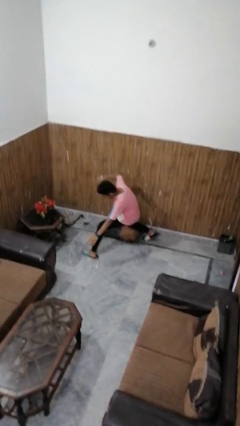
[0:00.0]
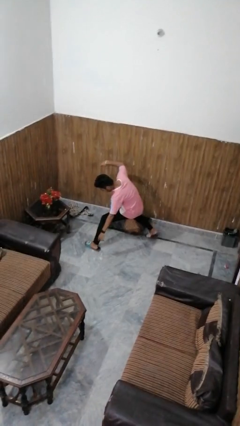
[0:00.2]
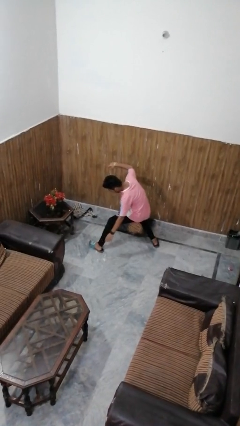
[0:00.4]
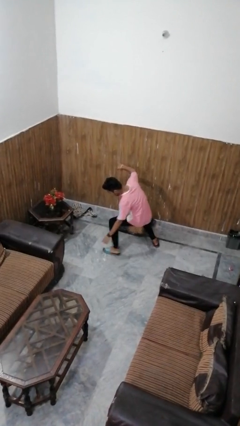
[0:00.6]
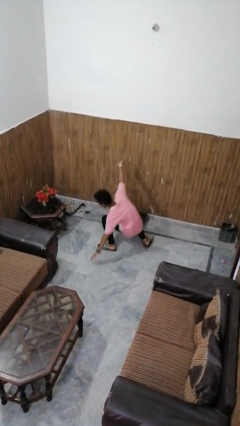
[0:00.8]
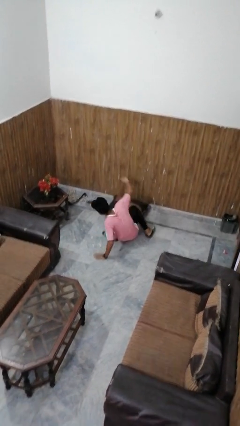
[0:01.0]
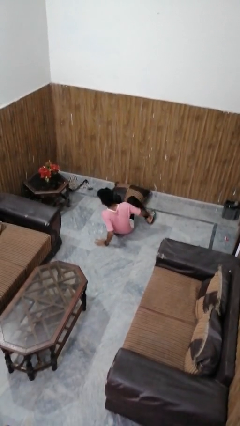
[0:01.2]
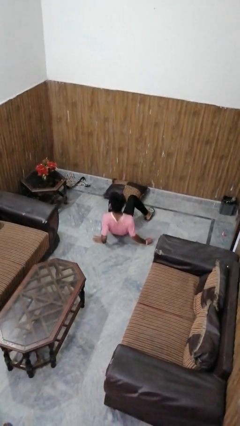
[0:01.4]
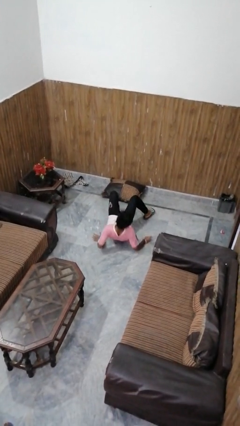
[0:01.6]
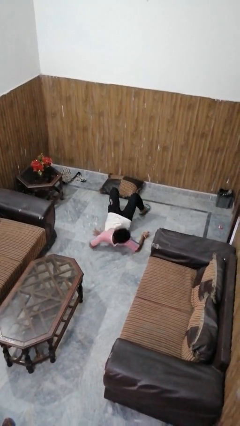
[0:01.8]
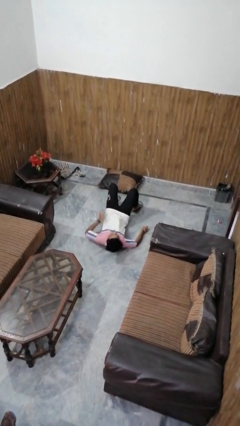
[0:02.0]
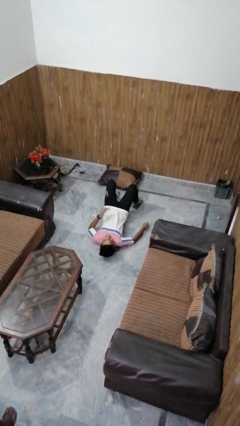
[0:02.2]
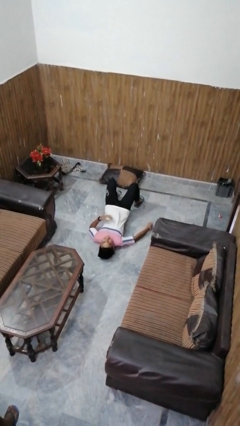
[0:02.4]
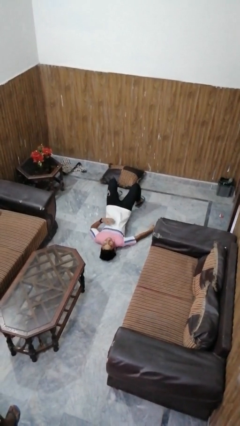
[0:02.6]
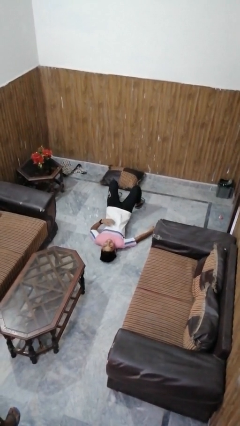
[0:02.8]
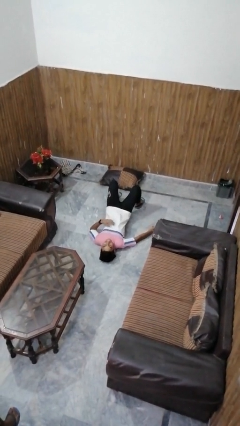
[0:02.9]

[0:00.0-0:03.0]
person lies down on floor

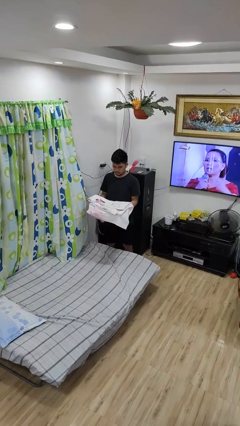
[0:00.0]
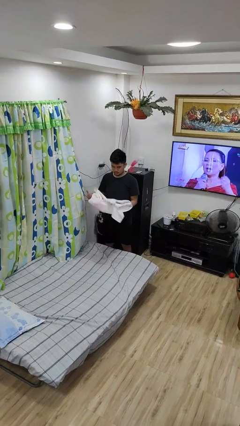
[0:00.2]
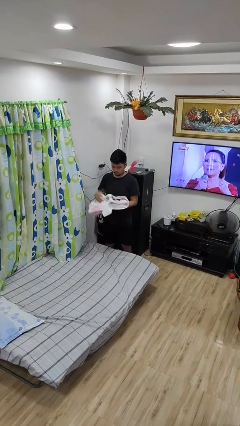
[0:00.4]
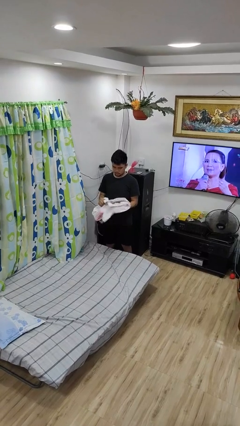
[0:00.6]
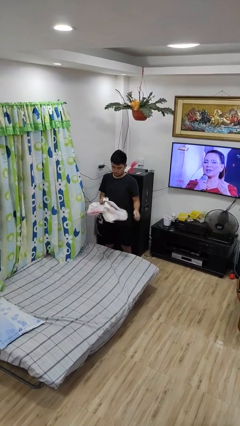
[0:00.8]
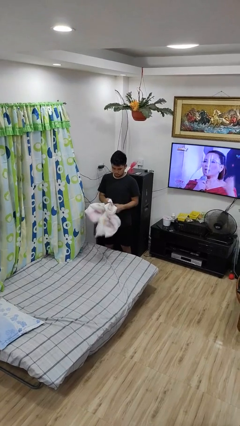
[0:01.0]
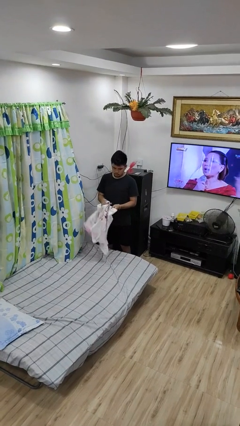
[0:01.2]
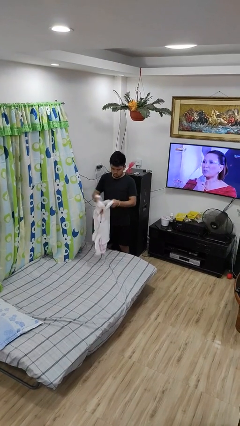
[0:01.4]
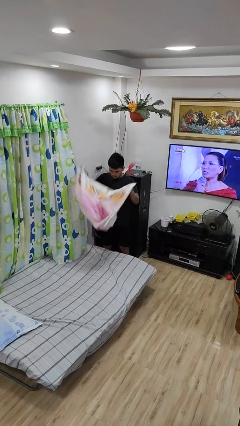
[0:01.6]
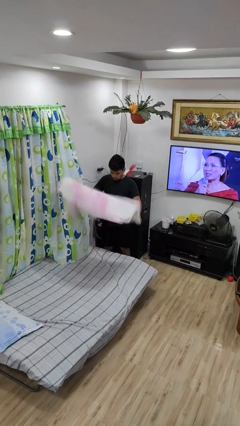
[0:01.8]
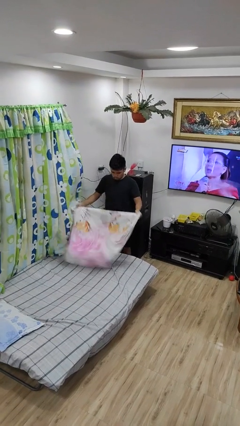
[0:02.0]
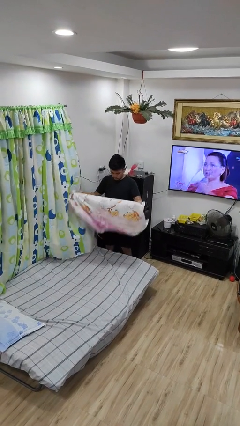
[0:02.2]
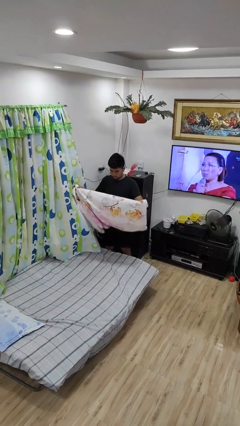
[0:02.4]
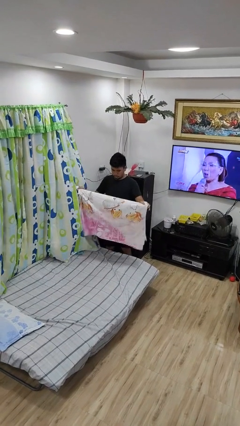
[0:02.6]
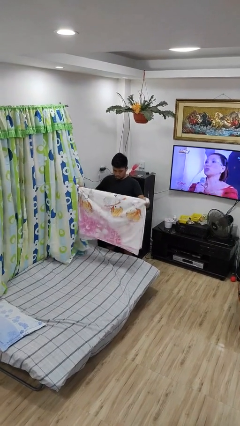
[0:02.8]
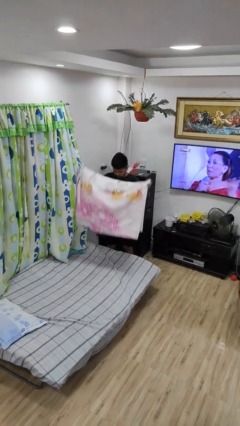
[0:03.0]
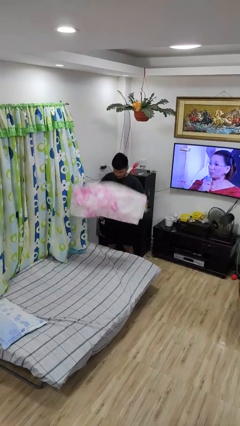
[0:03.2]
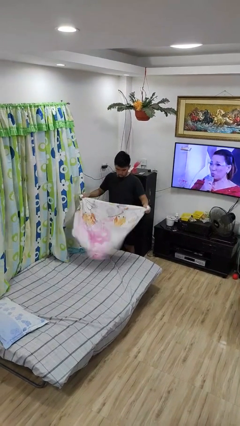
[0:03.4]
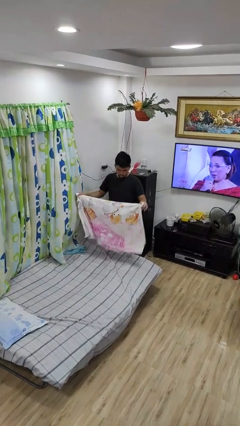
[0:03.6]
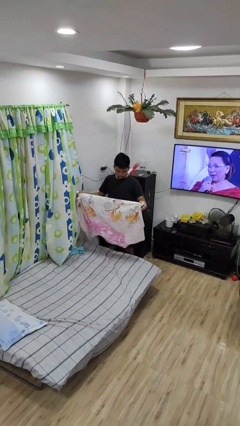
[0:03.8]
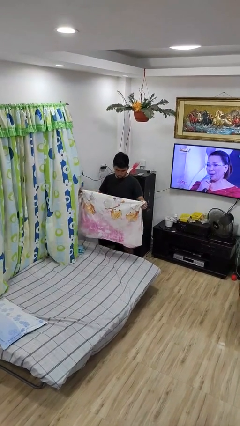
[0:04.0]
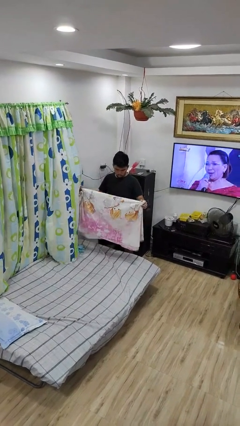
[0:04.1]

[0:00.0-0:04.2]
person unfolds blanket

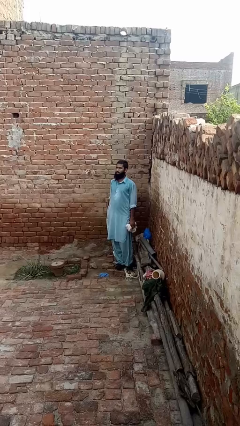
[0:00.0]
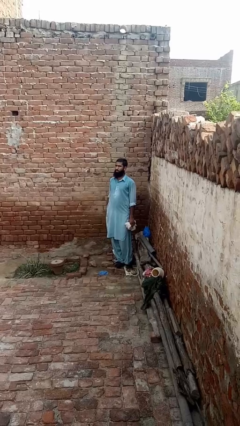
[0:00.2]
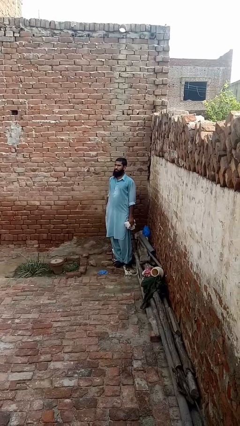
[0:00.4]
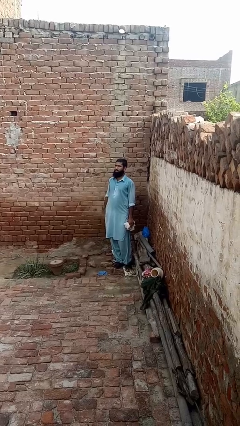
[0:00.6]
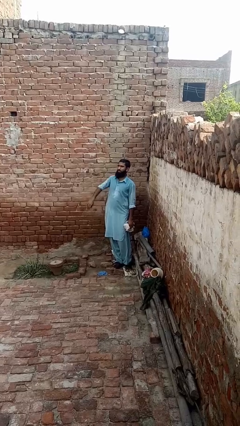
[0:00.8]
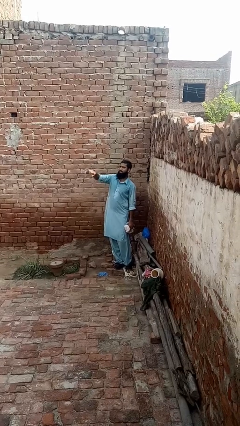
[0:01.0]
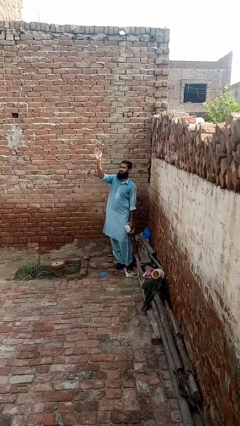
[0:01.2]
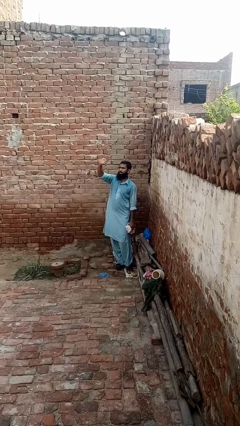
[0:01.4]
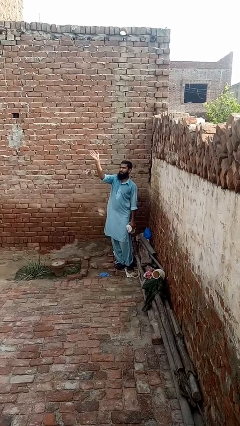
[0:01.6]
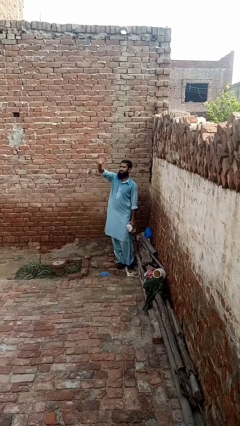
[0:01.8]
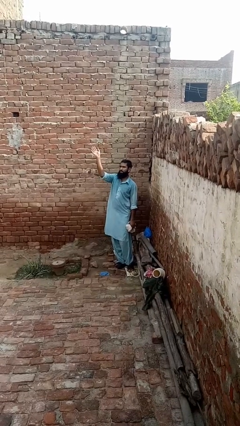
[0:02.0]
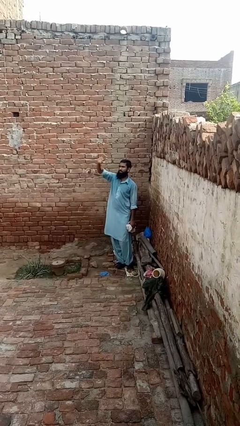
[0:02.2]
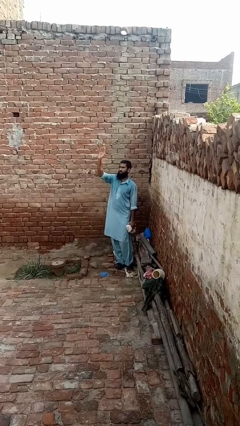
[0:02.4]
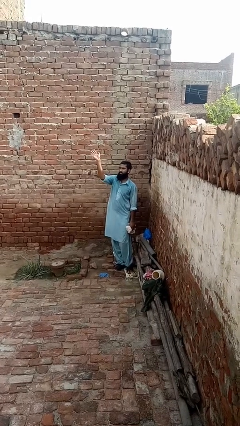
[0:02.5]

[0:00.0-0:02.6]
person waves at person

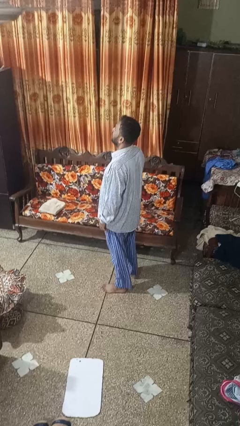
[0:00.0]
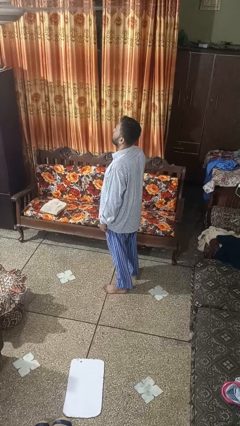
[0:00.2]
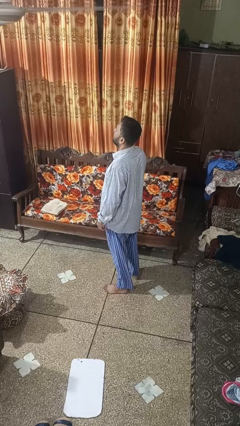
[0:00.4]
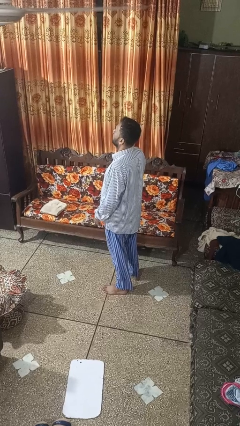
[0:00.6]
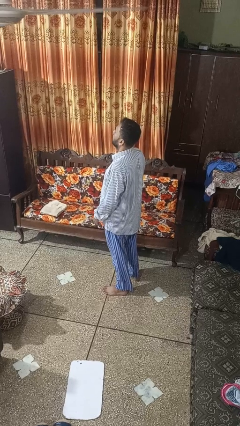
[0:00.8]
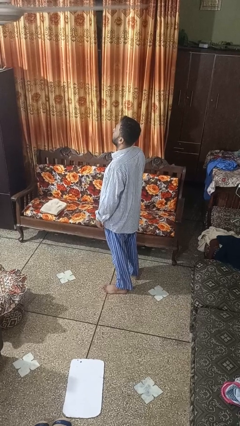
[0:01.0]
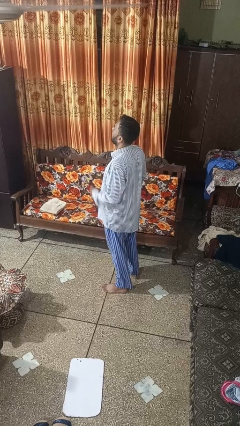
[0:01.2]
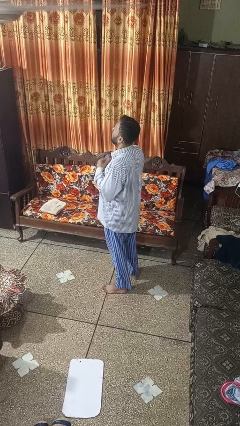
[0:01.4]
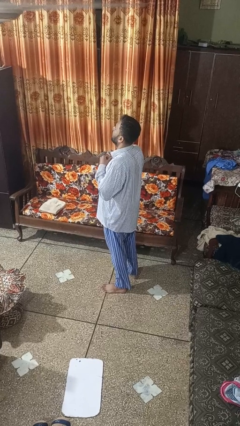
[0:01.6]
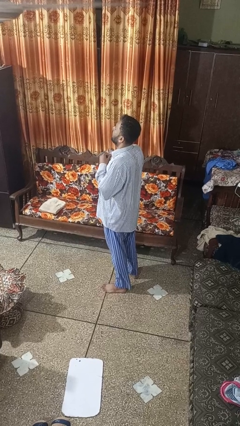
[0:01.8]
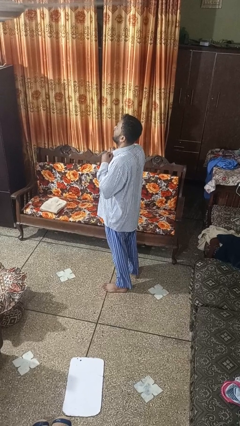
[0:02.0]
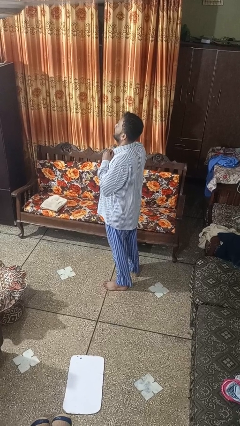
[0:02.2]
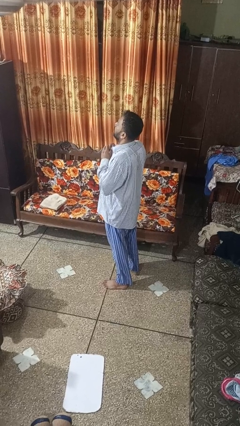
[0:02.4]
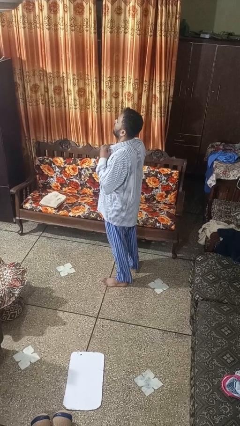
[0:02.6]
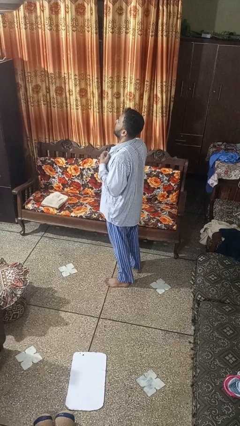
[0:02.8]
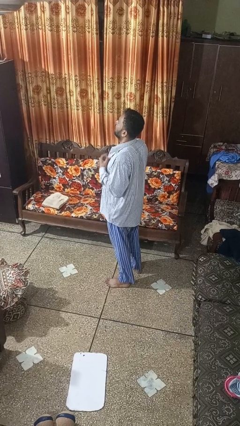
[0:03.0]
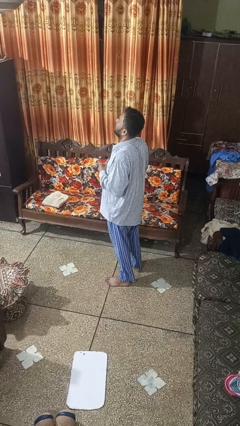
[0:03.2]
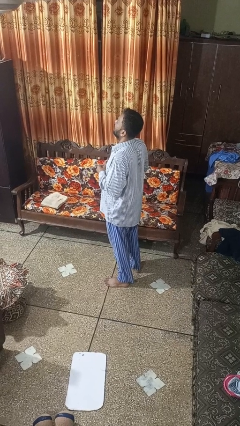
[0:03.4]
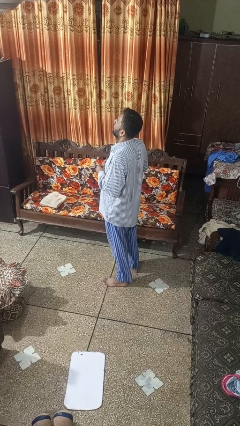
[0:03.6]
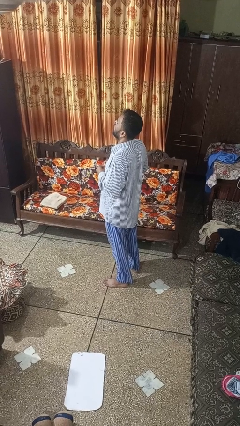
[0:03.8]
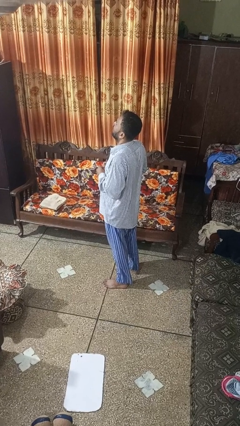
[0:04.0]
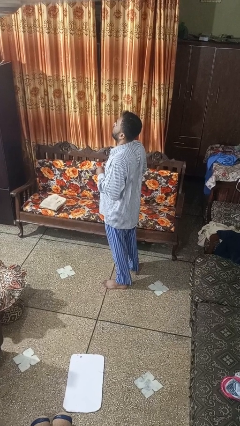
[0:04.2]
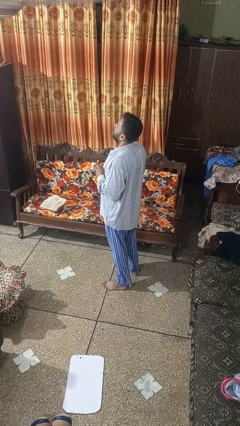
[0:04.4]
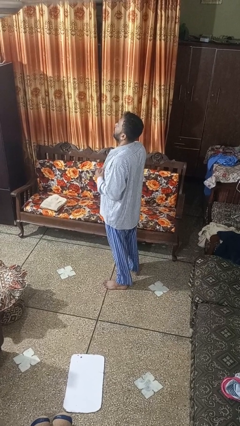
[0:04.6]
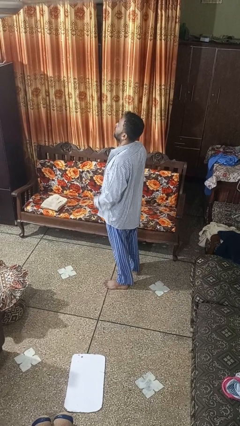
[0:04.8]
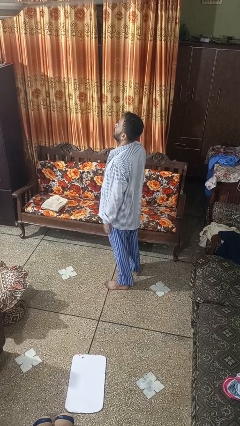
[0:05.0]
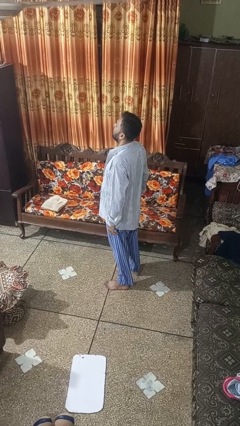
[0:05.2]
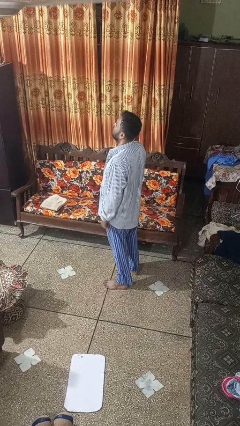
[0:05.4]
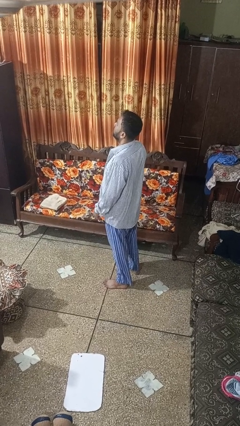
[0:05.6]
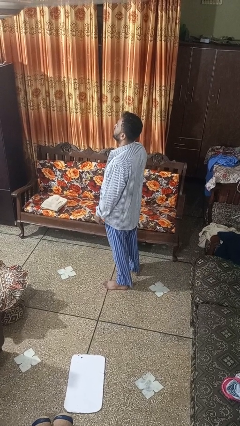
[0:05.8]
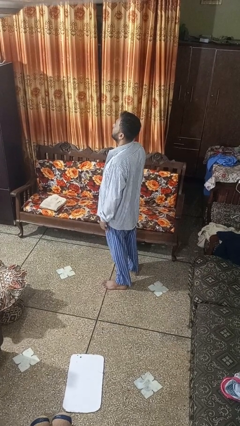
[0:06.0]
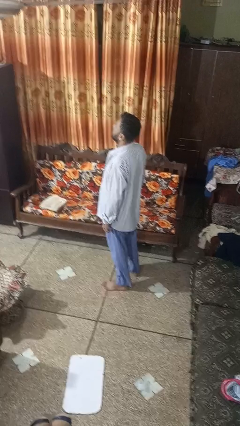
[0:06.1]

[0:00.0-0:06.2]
person unbuttons shirt

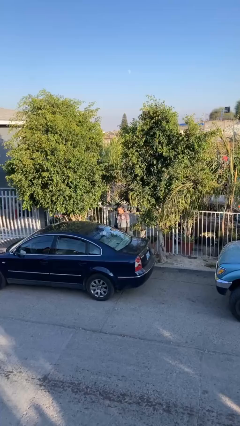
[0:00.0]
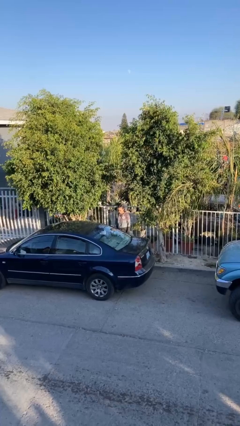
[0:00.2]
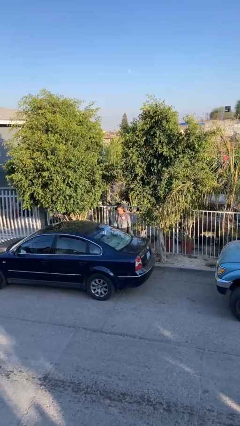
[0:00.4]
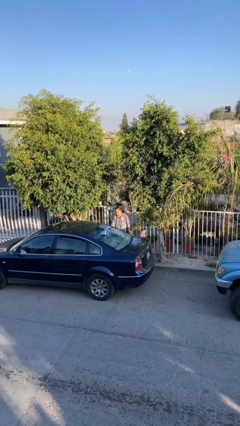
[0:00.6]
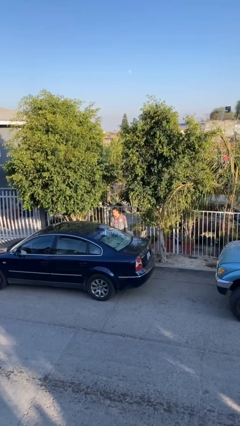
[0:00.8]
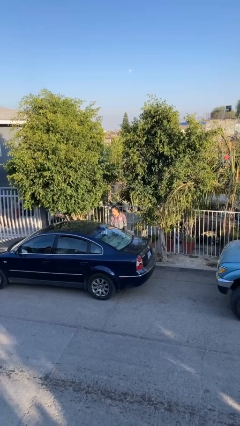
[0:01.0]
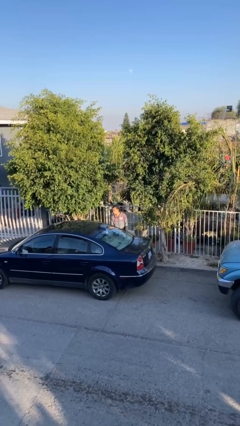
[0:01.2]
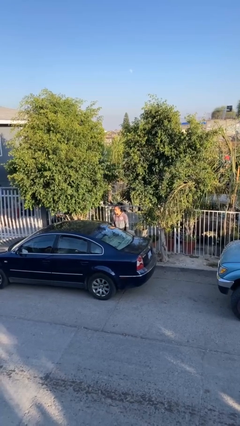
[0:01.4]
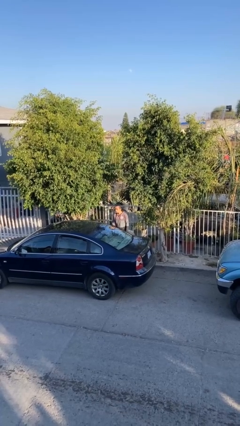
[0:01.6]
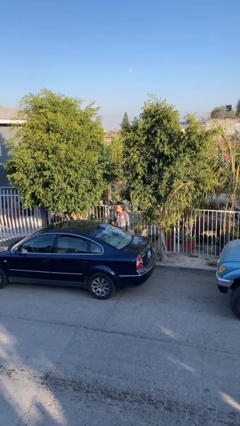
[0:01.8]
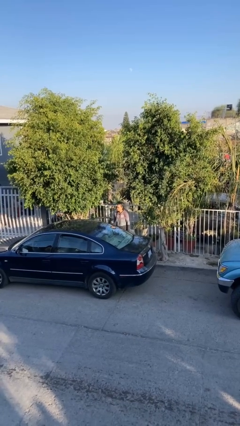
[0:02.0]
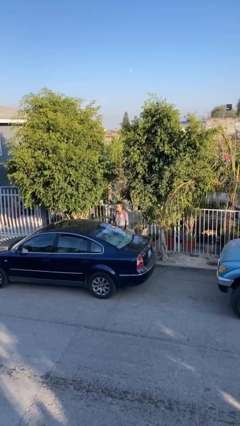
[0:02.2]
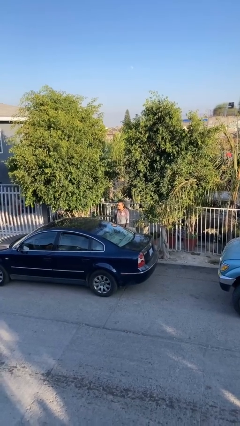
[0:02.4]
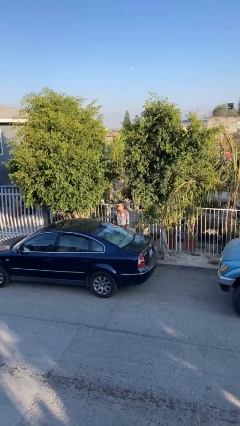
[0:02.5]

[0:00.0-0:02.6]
person opens car door
